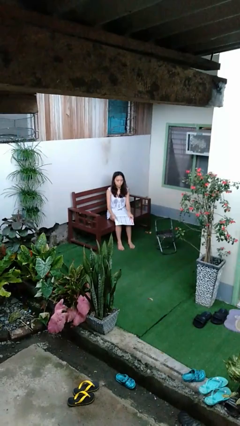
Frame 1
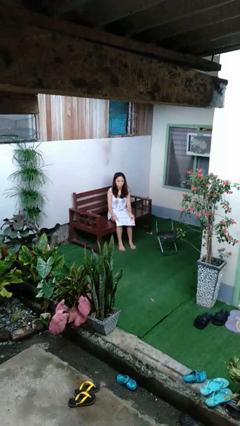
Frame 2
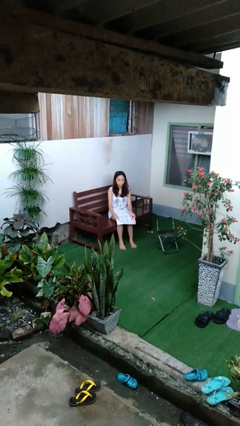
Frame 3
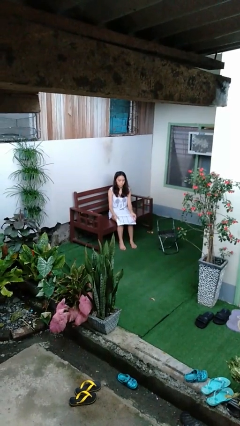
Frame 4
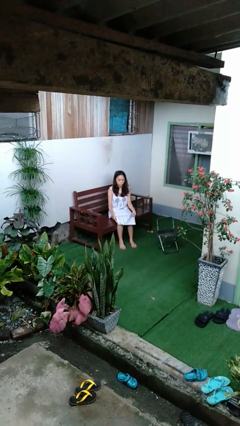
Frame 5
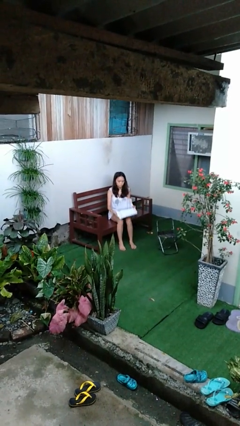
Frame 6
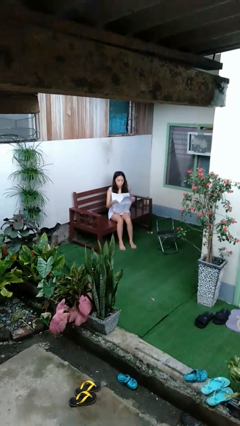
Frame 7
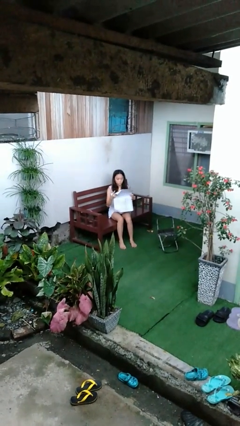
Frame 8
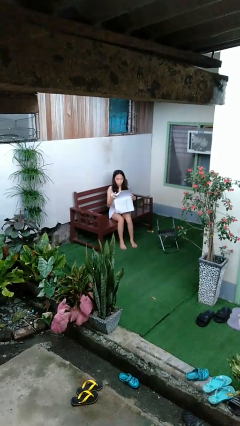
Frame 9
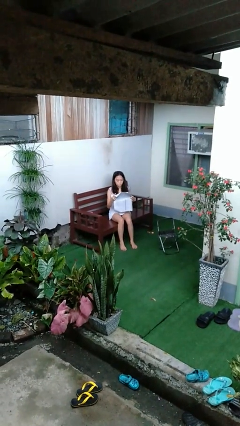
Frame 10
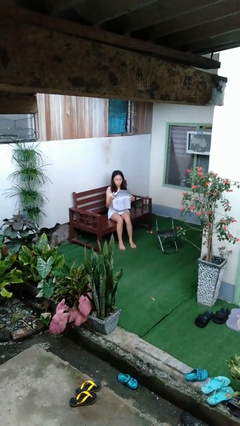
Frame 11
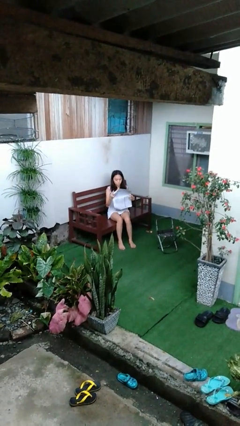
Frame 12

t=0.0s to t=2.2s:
person reads newspaper

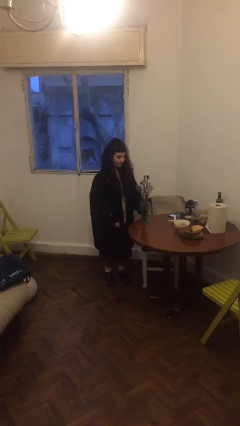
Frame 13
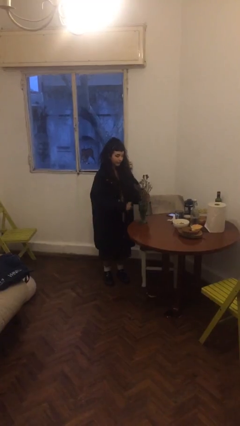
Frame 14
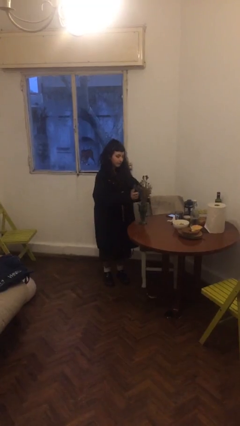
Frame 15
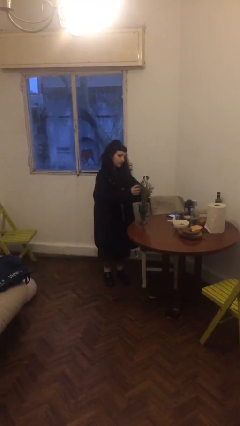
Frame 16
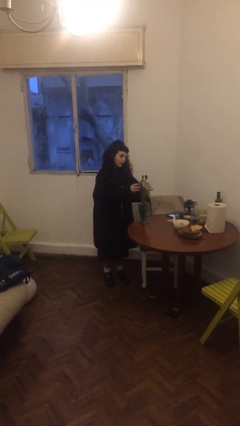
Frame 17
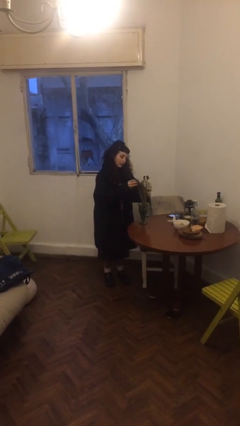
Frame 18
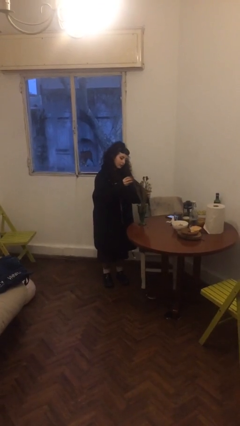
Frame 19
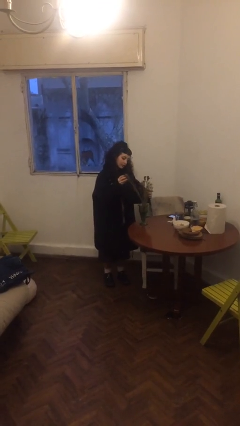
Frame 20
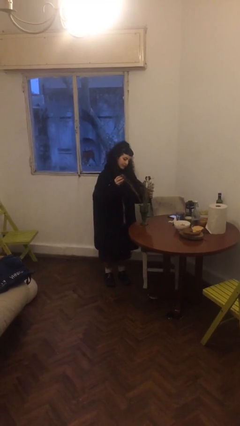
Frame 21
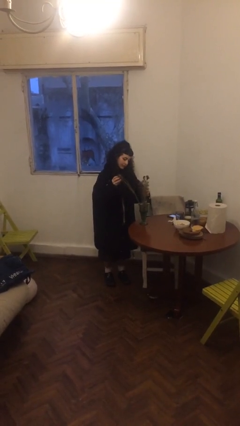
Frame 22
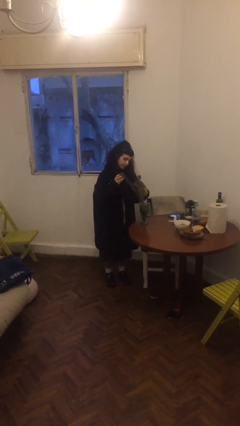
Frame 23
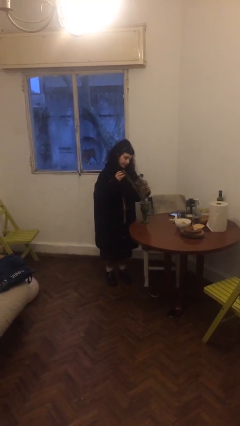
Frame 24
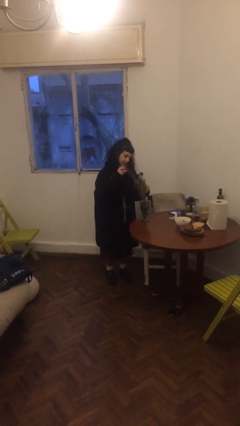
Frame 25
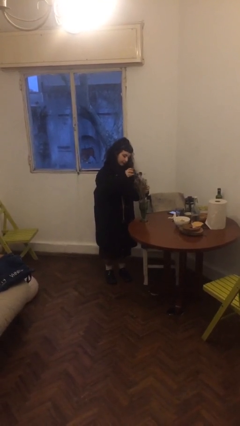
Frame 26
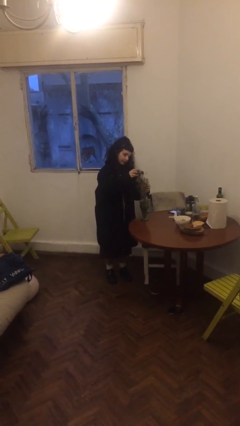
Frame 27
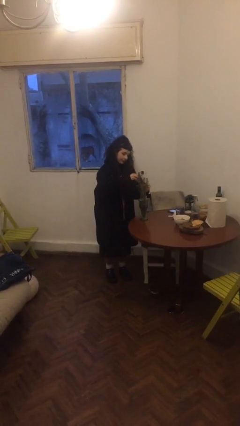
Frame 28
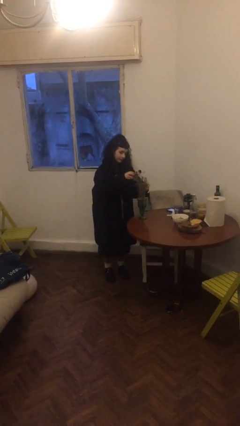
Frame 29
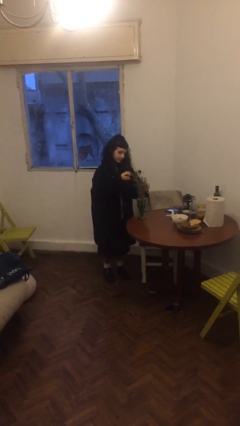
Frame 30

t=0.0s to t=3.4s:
person arranges flowers in vase

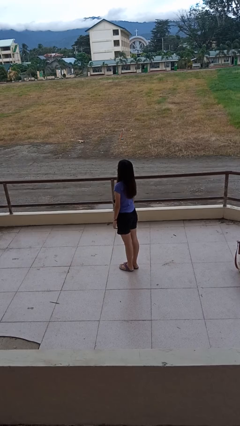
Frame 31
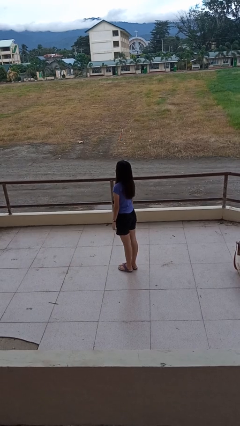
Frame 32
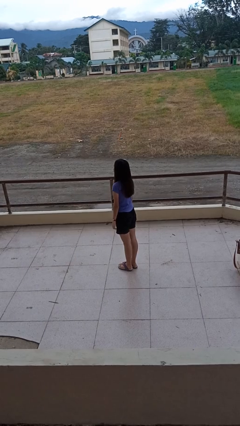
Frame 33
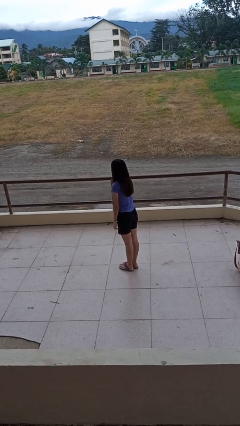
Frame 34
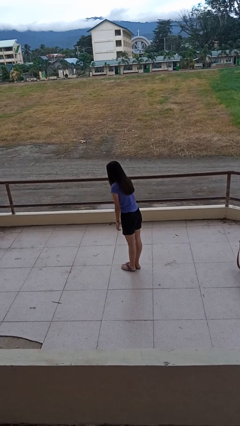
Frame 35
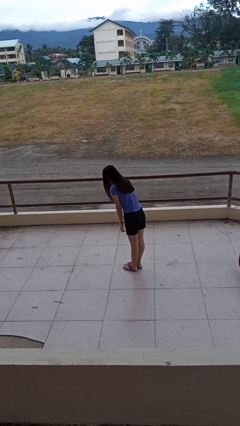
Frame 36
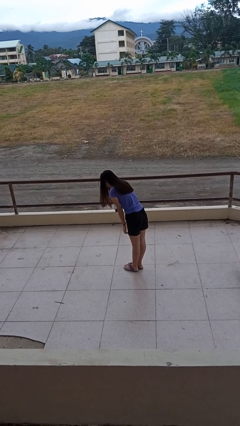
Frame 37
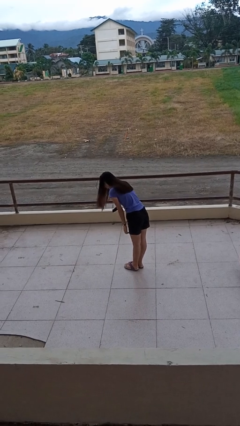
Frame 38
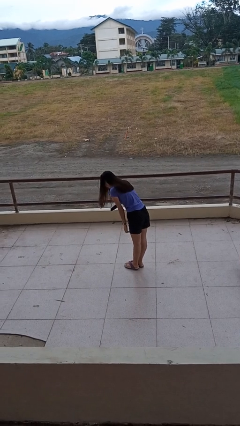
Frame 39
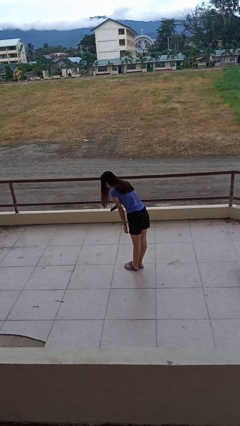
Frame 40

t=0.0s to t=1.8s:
person bows

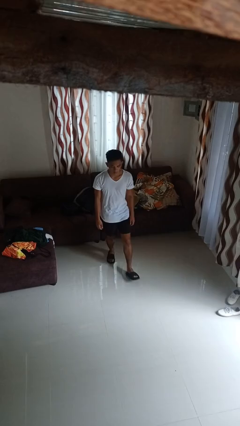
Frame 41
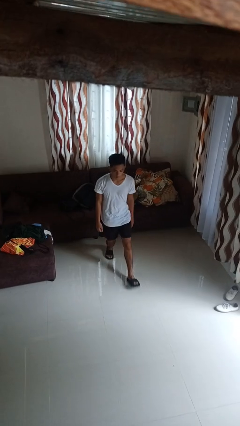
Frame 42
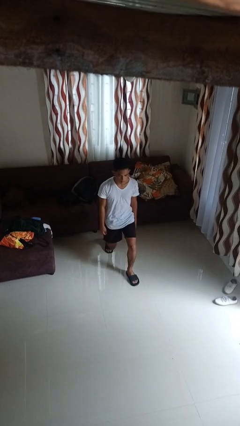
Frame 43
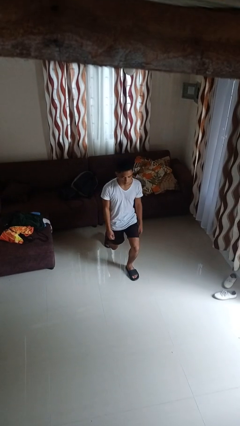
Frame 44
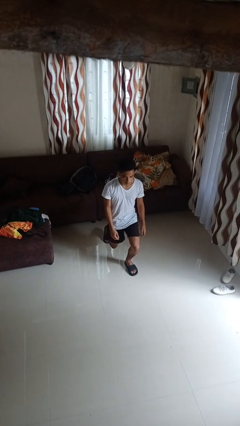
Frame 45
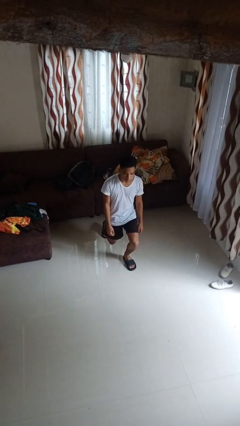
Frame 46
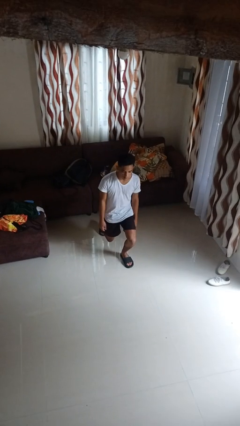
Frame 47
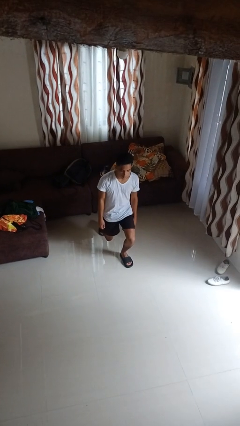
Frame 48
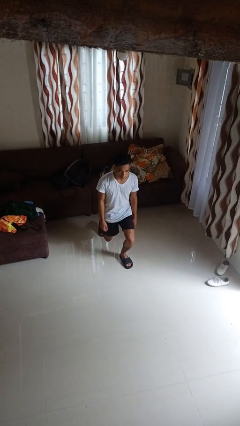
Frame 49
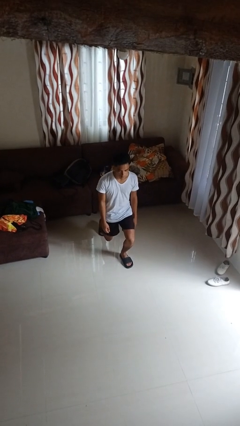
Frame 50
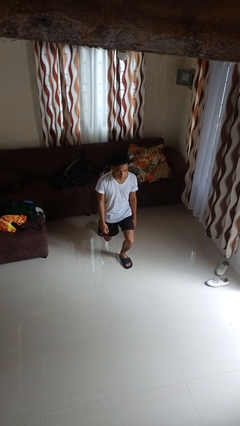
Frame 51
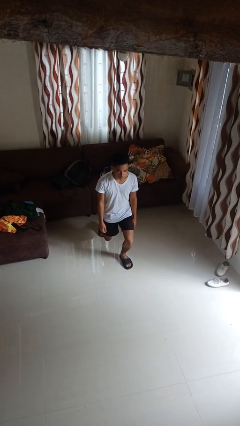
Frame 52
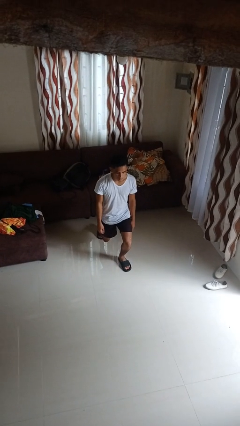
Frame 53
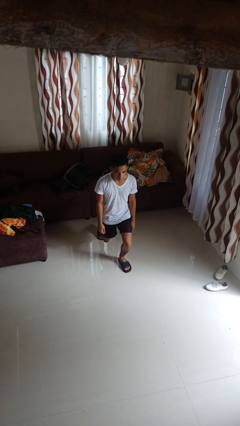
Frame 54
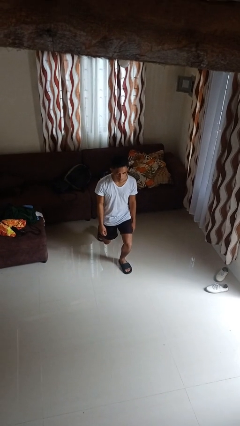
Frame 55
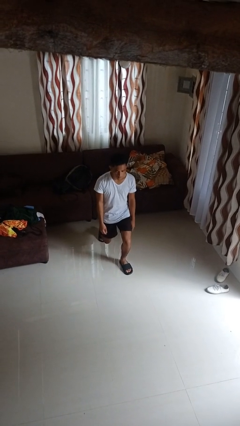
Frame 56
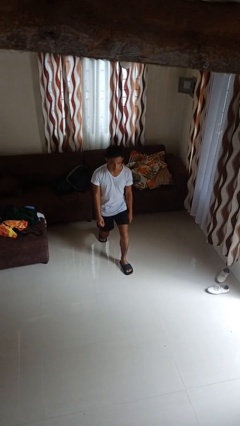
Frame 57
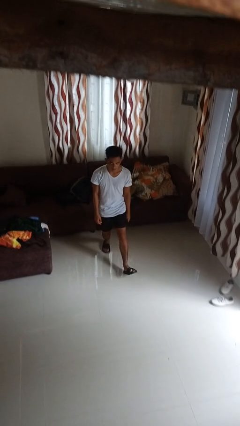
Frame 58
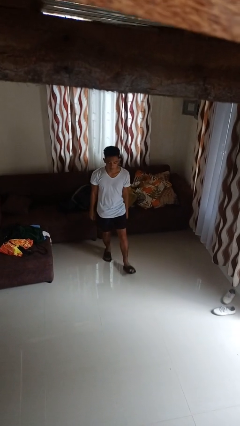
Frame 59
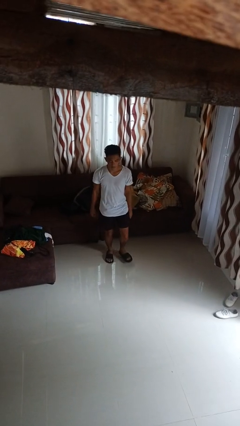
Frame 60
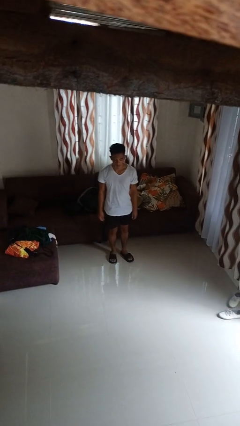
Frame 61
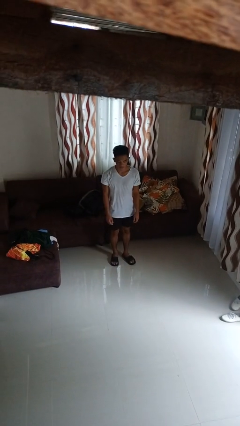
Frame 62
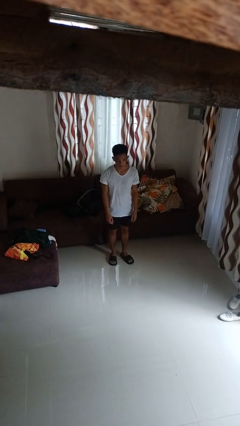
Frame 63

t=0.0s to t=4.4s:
person exercises with lunges

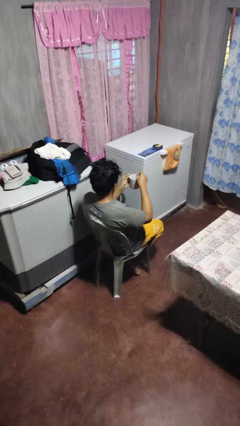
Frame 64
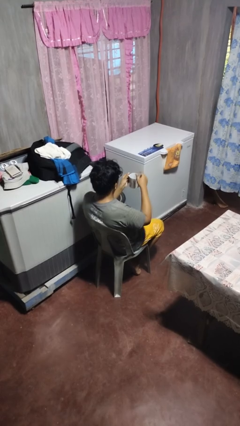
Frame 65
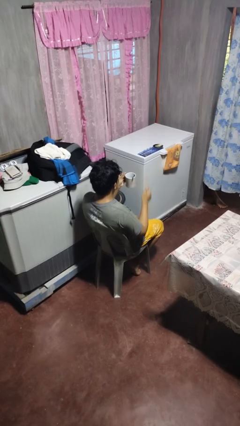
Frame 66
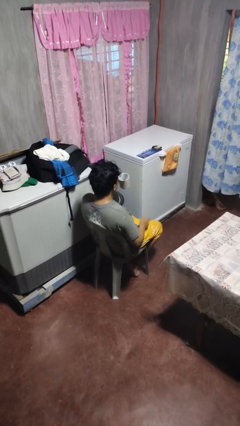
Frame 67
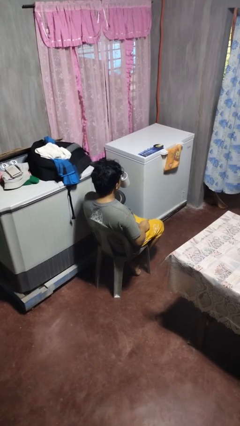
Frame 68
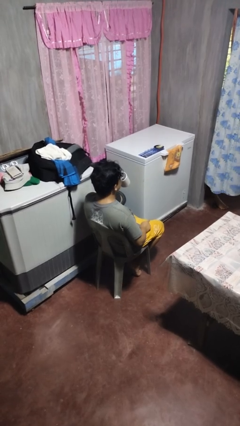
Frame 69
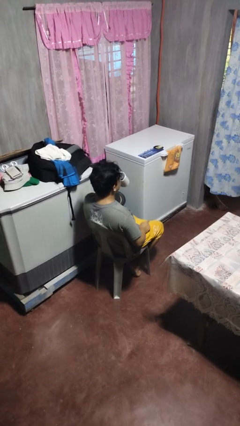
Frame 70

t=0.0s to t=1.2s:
person drinks from mug

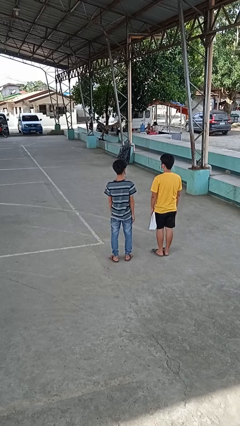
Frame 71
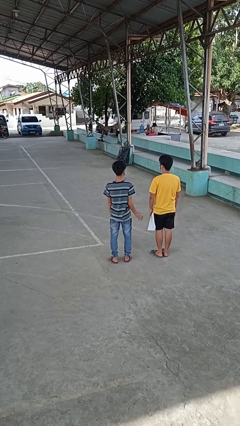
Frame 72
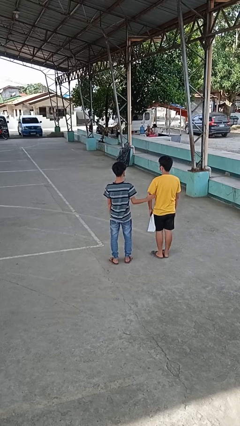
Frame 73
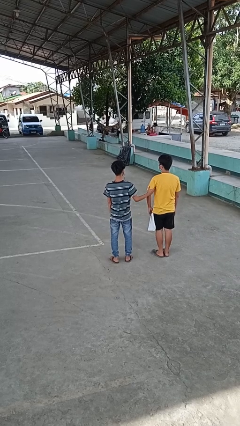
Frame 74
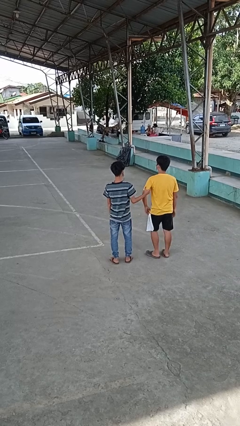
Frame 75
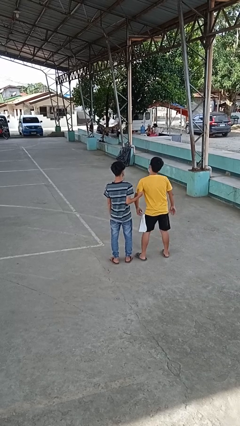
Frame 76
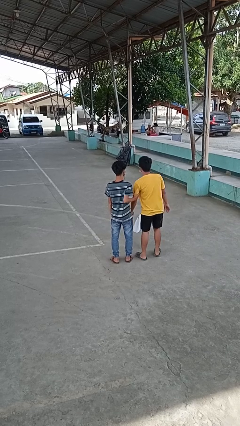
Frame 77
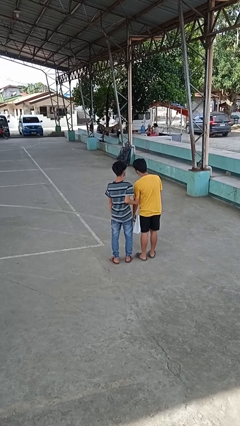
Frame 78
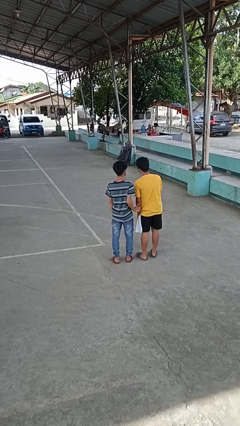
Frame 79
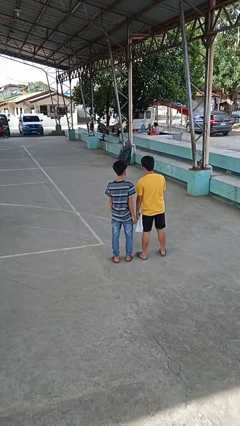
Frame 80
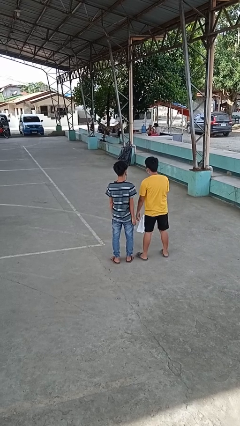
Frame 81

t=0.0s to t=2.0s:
person grabs person by bicep

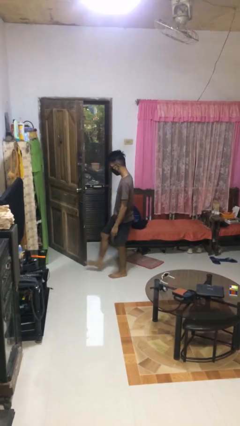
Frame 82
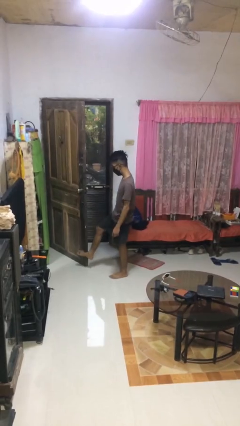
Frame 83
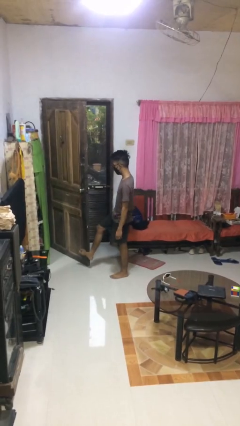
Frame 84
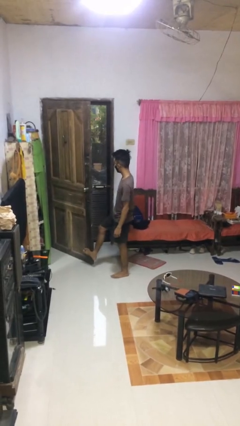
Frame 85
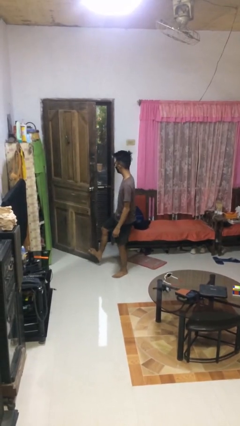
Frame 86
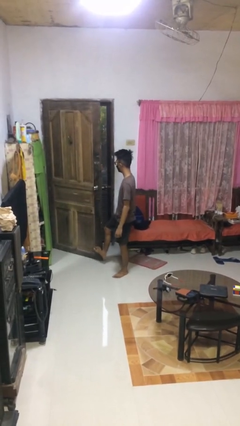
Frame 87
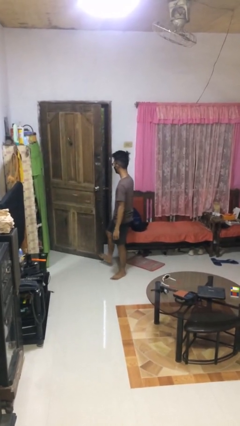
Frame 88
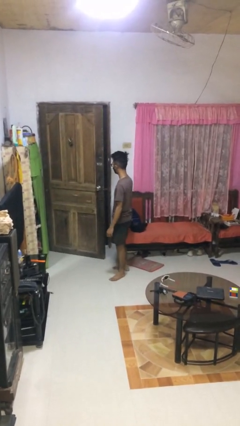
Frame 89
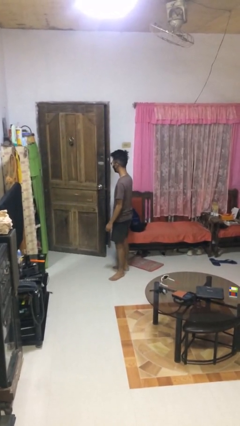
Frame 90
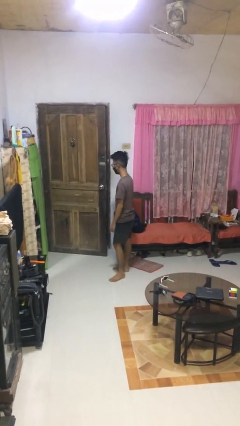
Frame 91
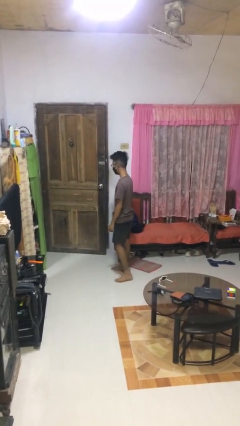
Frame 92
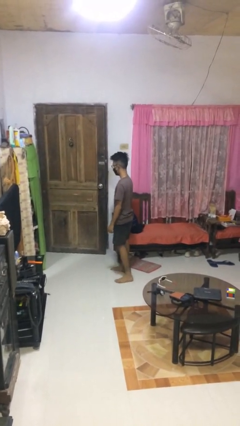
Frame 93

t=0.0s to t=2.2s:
person closes door with foot
